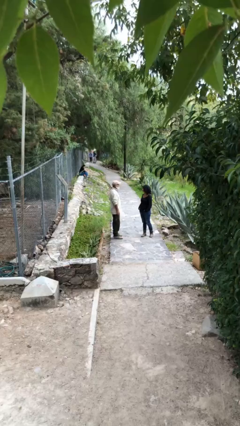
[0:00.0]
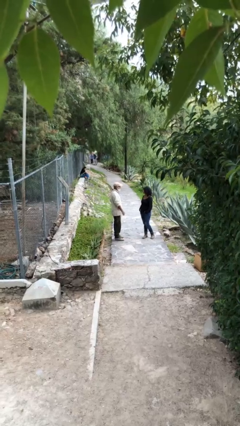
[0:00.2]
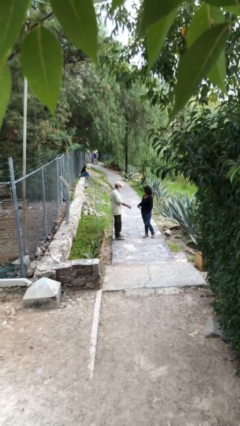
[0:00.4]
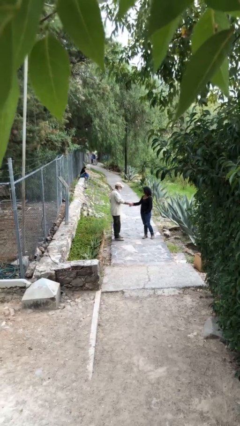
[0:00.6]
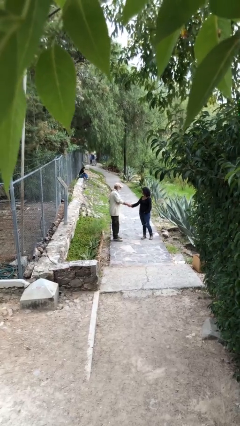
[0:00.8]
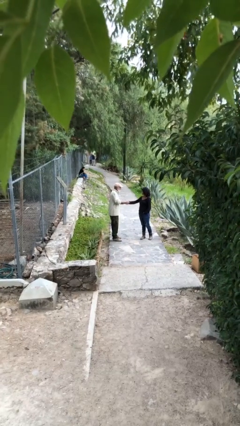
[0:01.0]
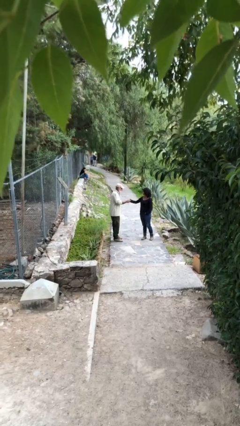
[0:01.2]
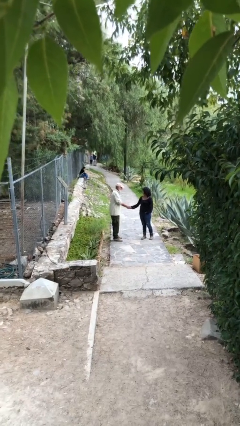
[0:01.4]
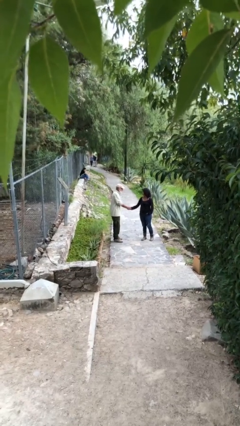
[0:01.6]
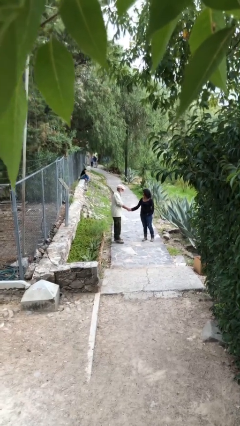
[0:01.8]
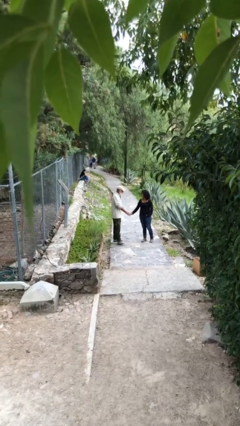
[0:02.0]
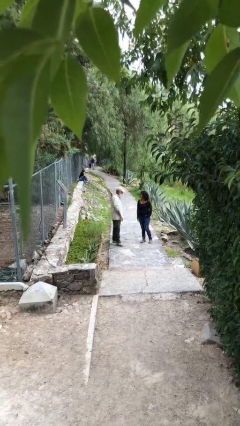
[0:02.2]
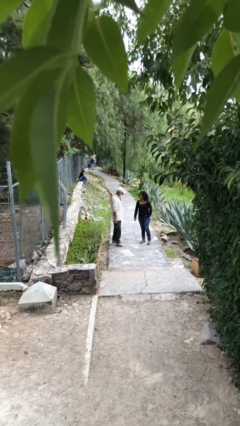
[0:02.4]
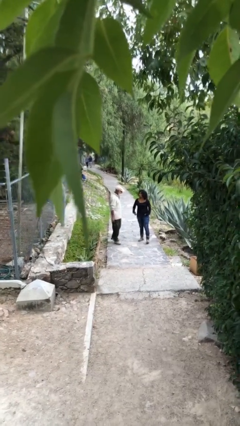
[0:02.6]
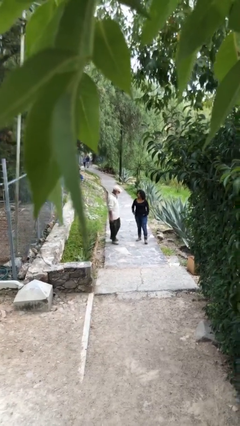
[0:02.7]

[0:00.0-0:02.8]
person shakes hand

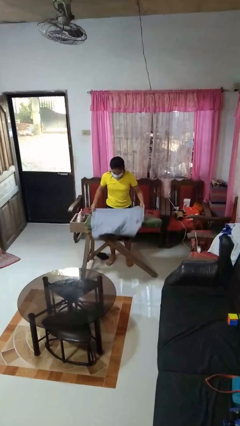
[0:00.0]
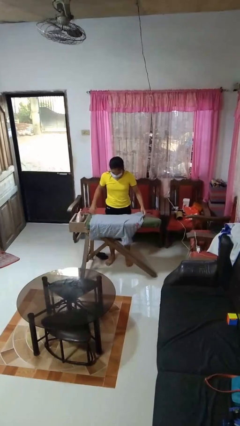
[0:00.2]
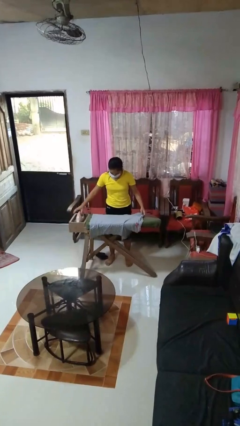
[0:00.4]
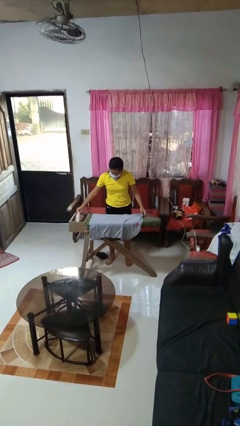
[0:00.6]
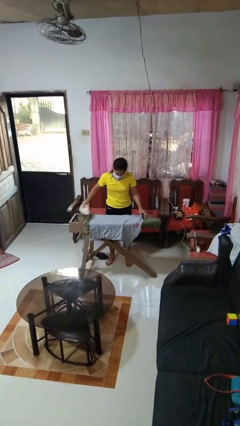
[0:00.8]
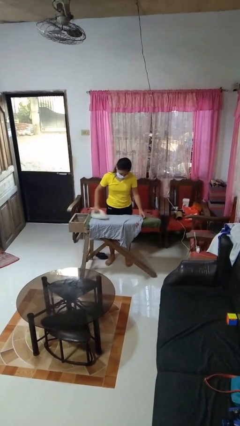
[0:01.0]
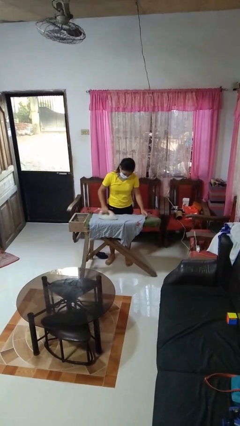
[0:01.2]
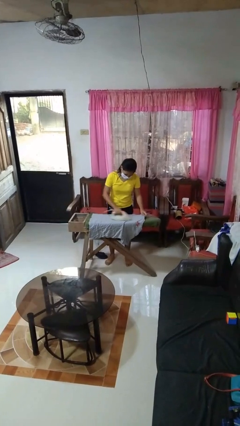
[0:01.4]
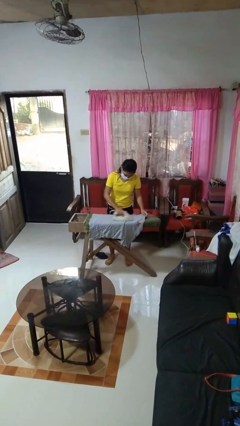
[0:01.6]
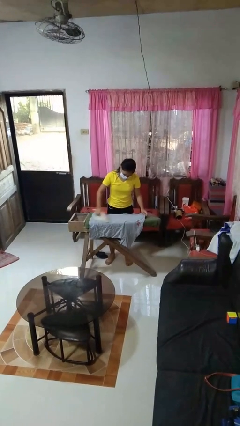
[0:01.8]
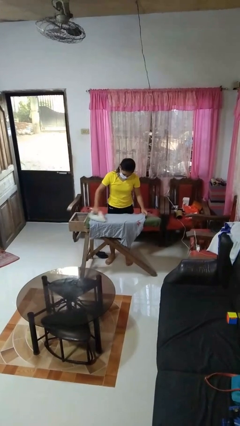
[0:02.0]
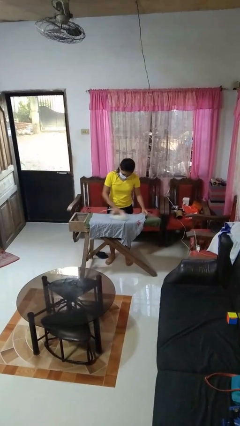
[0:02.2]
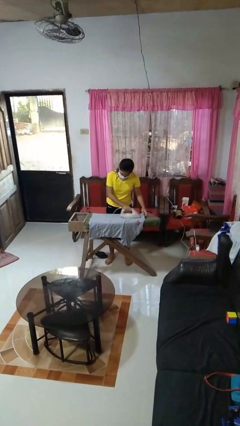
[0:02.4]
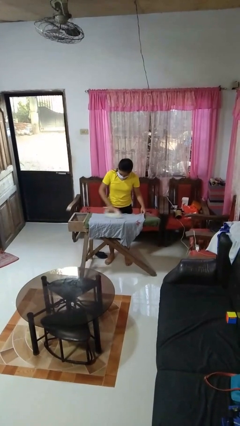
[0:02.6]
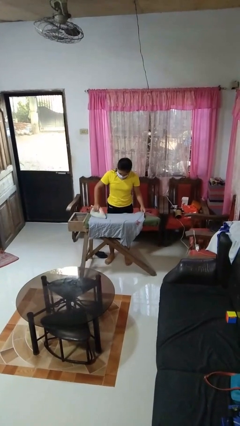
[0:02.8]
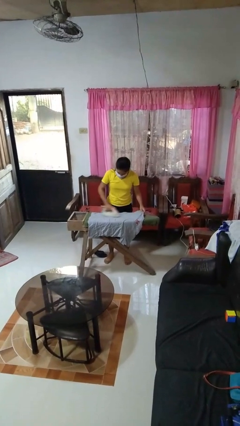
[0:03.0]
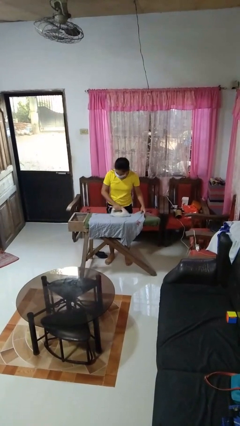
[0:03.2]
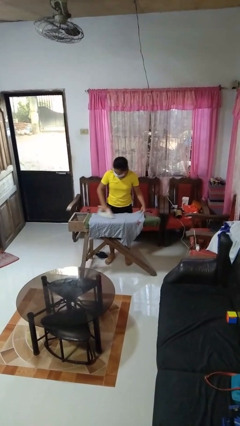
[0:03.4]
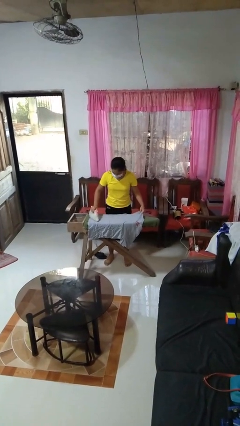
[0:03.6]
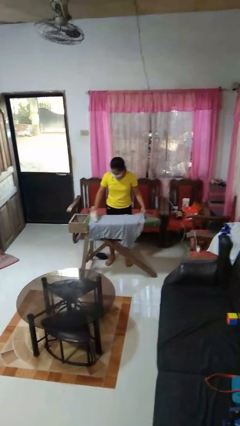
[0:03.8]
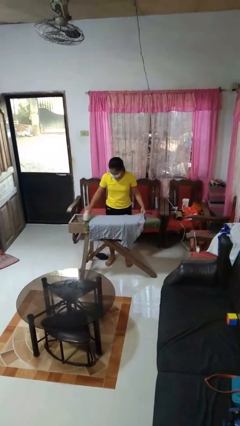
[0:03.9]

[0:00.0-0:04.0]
person irons clothes

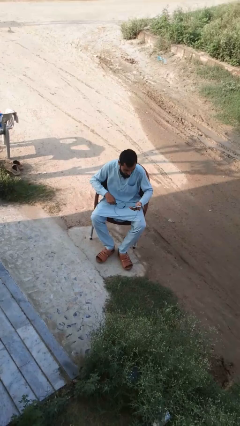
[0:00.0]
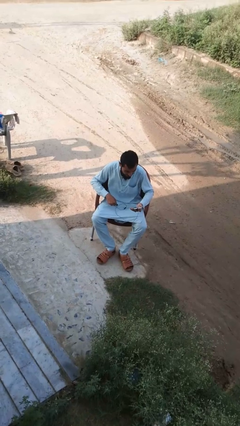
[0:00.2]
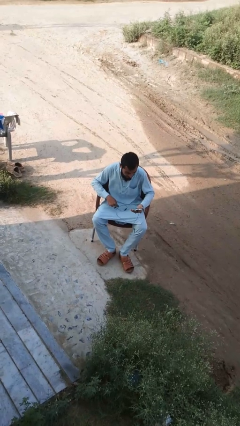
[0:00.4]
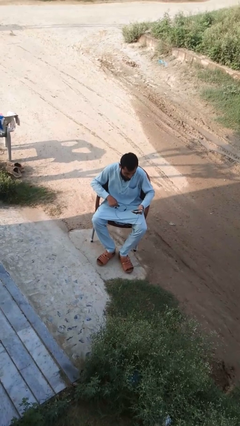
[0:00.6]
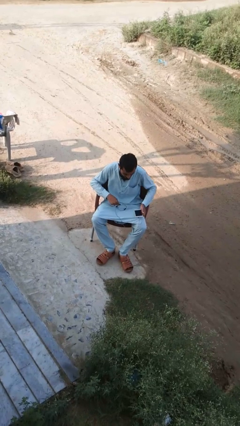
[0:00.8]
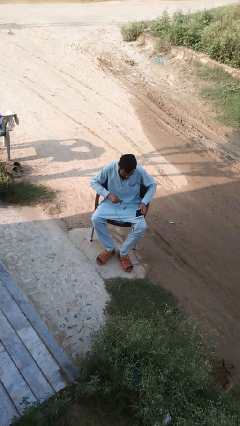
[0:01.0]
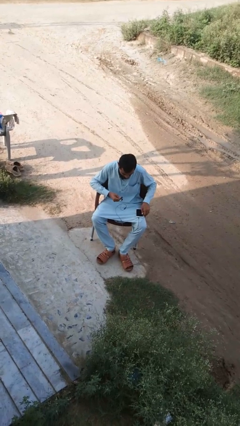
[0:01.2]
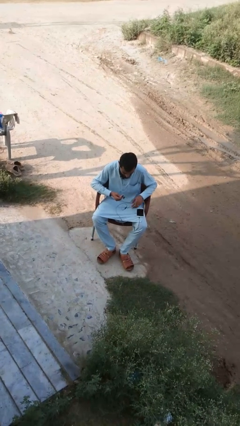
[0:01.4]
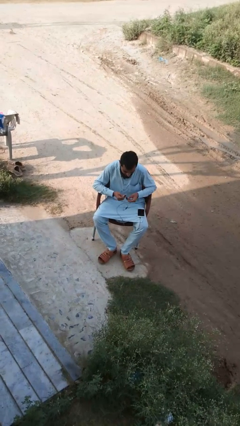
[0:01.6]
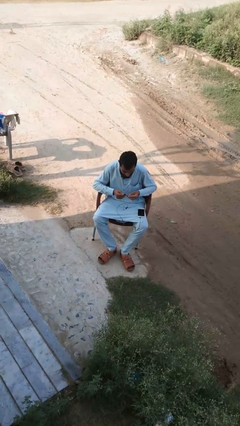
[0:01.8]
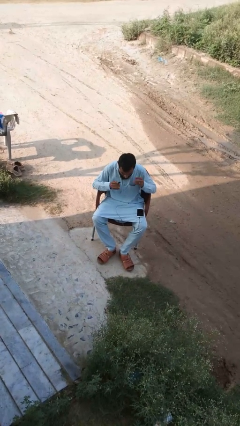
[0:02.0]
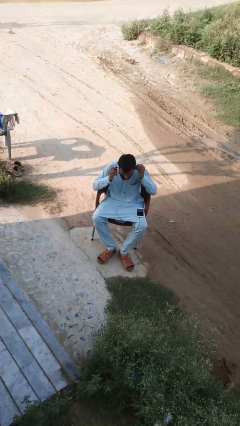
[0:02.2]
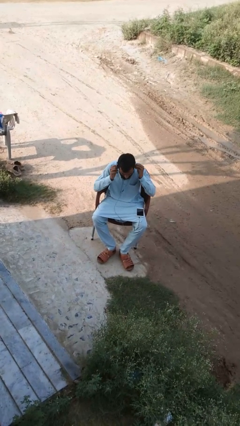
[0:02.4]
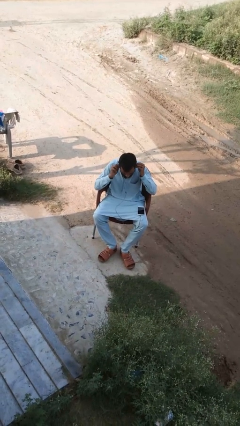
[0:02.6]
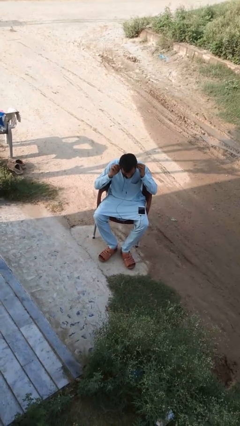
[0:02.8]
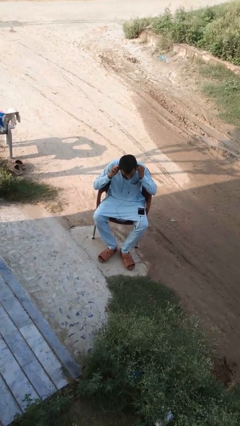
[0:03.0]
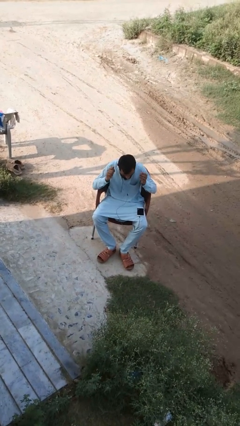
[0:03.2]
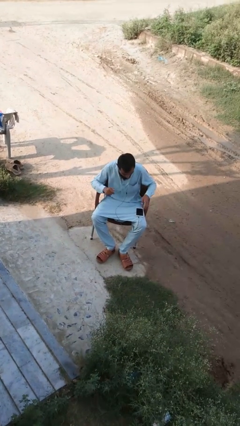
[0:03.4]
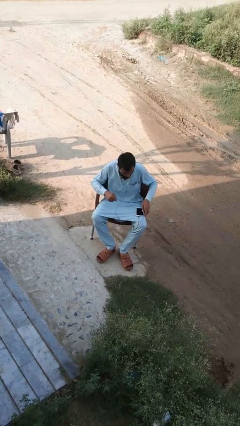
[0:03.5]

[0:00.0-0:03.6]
person puts on headphones

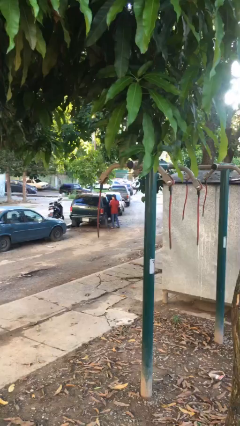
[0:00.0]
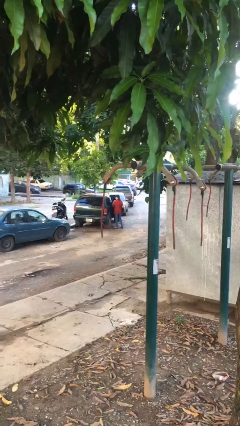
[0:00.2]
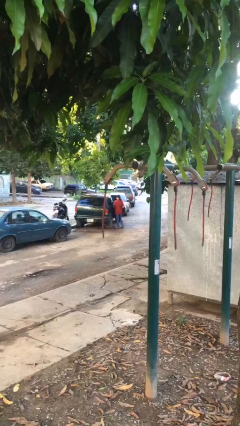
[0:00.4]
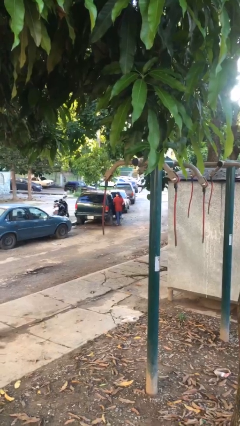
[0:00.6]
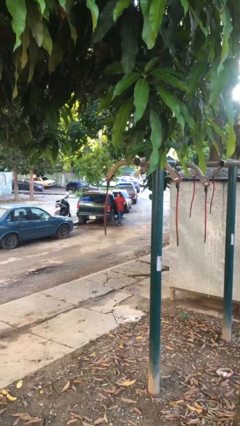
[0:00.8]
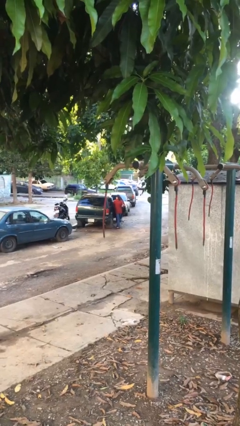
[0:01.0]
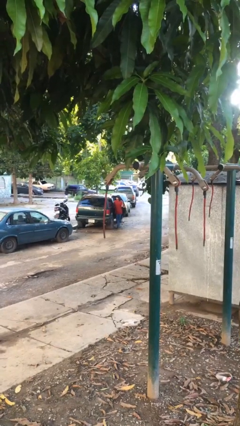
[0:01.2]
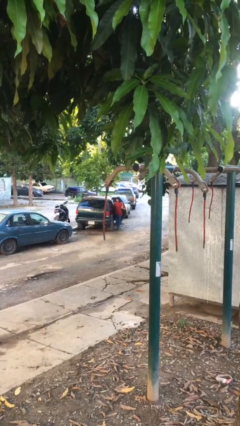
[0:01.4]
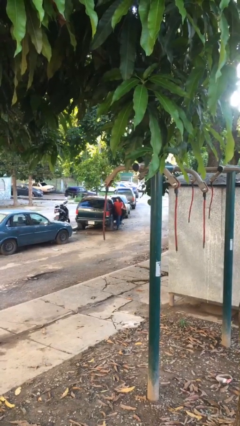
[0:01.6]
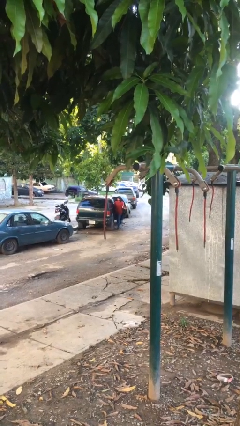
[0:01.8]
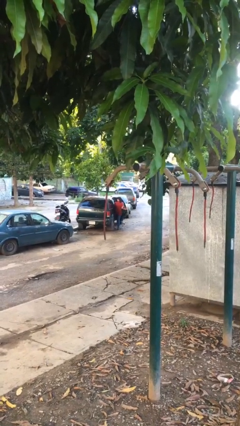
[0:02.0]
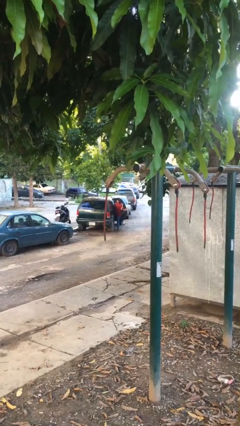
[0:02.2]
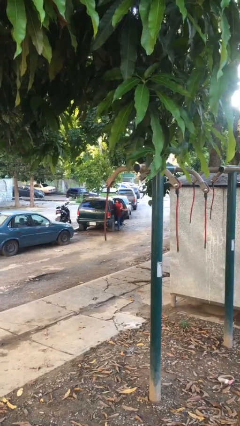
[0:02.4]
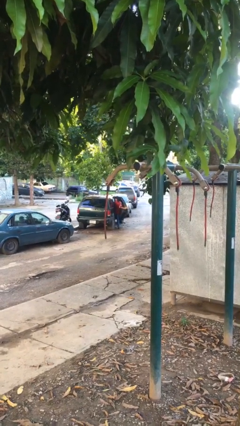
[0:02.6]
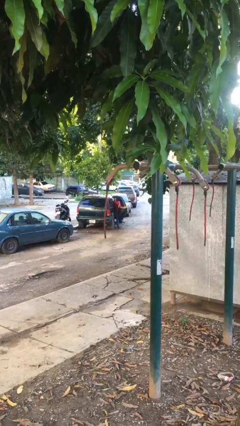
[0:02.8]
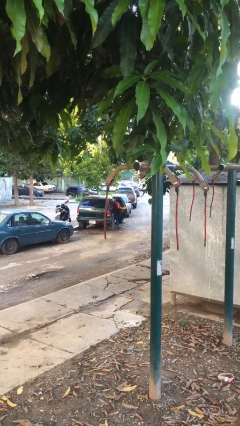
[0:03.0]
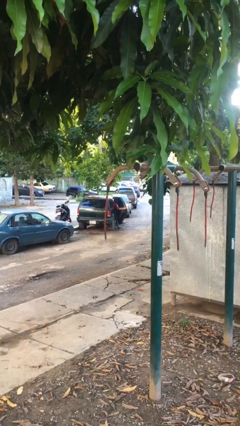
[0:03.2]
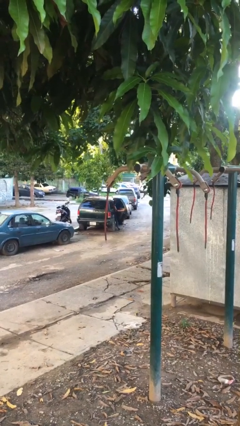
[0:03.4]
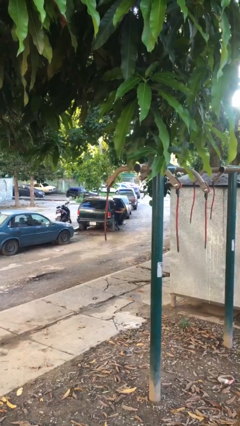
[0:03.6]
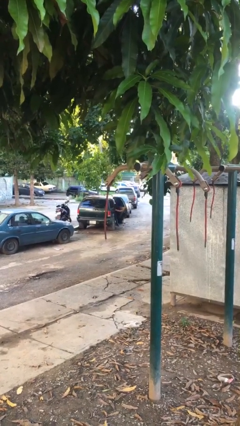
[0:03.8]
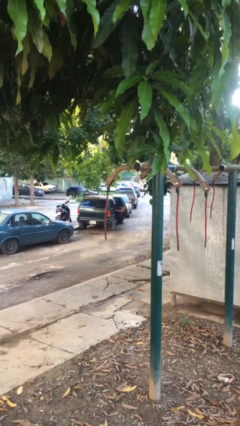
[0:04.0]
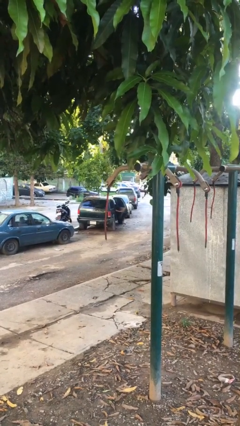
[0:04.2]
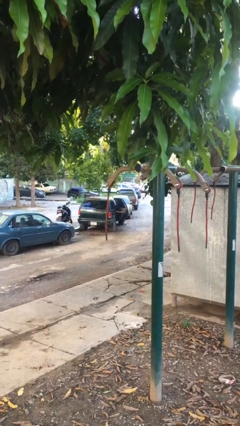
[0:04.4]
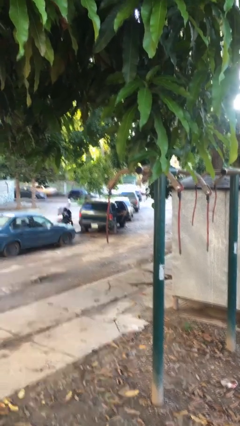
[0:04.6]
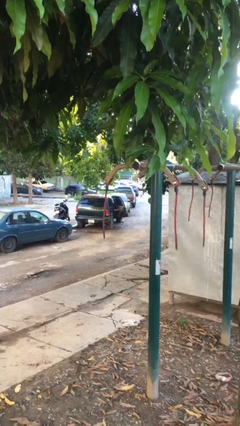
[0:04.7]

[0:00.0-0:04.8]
person enters car

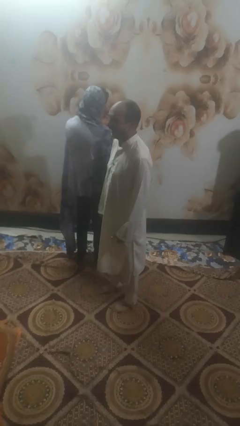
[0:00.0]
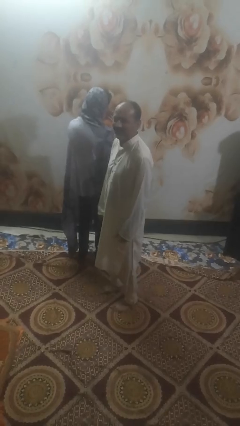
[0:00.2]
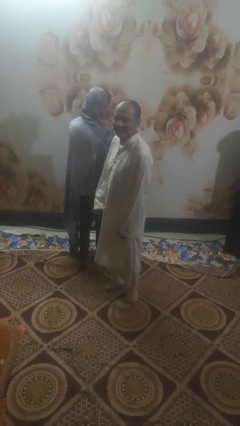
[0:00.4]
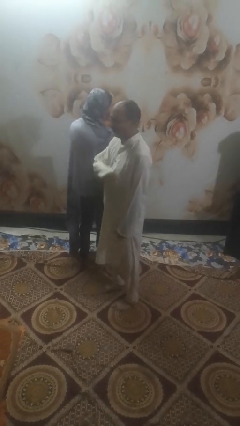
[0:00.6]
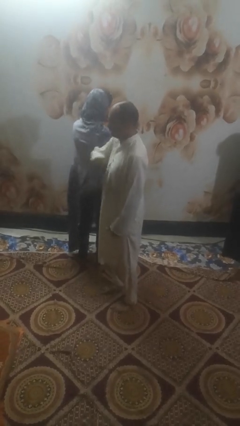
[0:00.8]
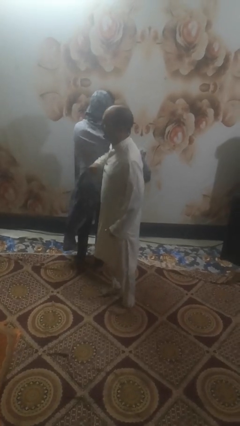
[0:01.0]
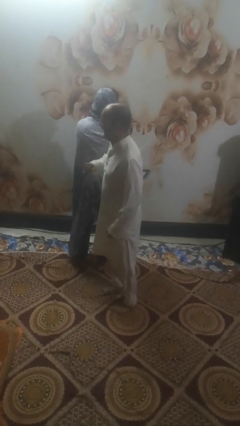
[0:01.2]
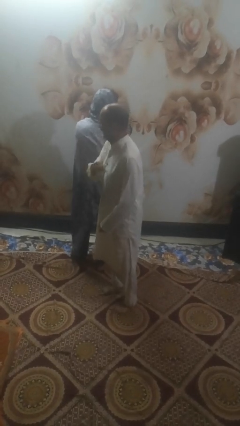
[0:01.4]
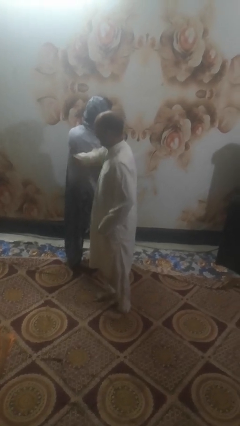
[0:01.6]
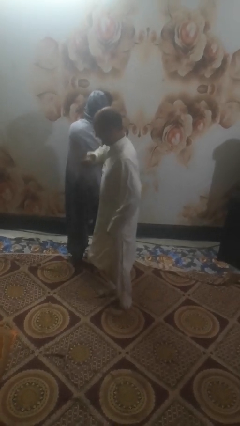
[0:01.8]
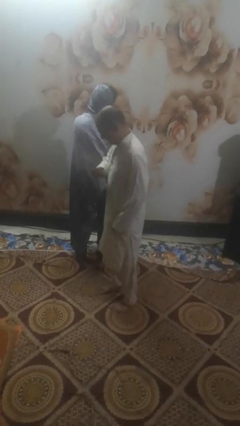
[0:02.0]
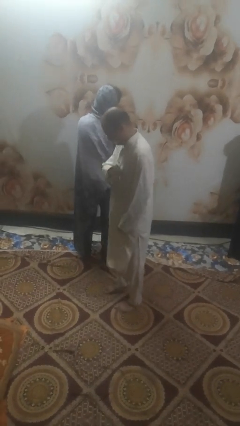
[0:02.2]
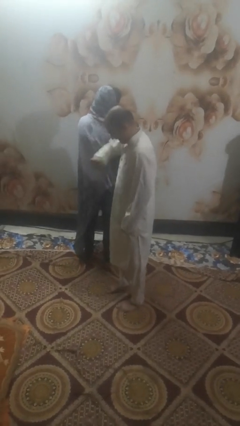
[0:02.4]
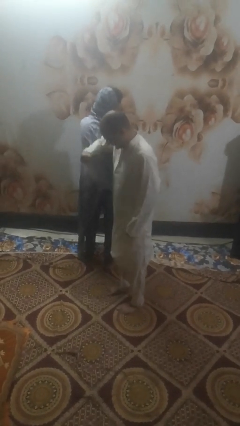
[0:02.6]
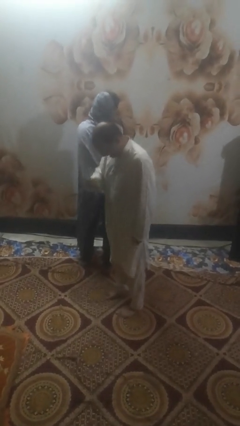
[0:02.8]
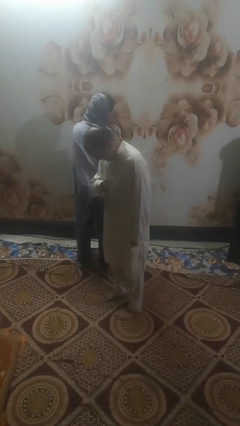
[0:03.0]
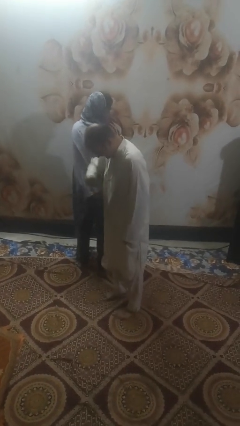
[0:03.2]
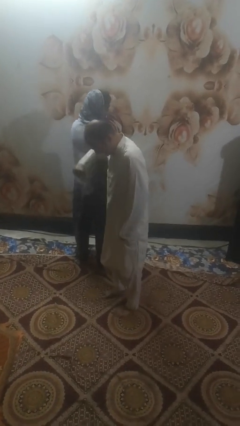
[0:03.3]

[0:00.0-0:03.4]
person nudges person with elbow
